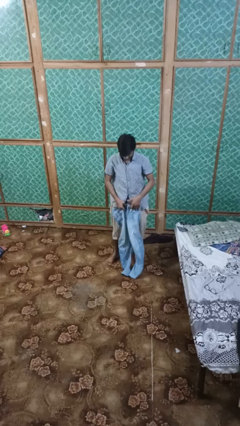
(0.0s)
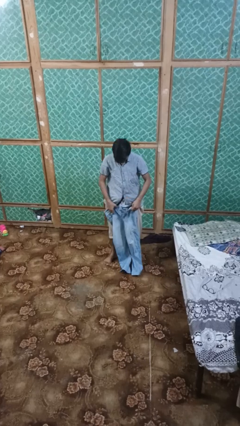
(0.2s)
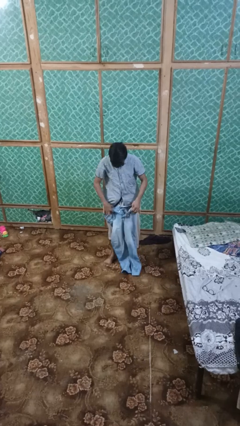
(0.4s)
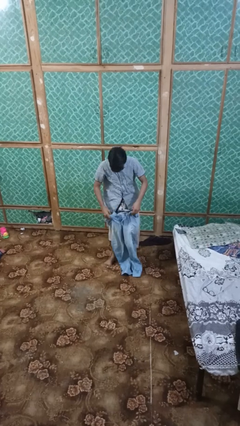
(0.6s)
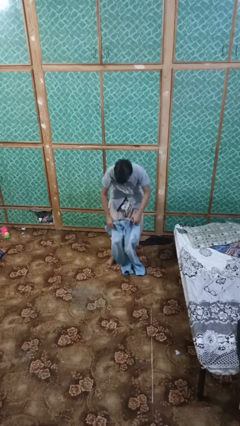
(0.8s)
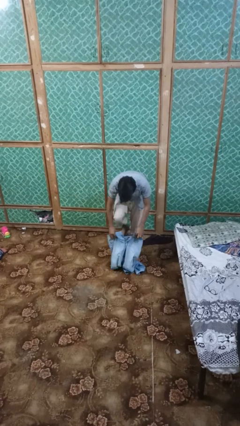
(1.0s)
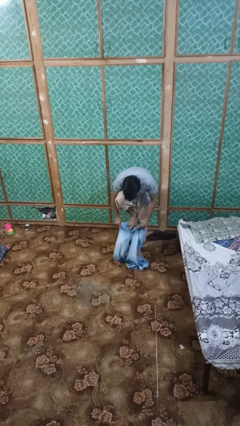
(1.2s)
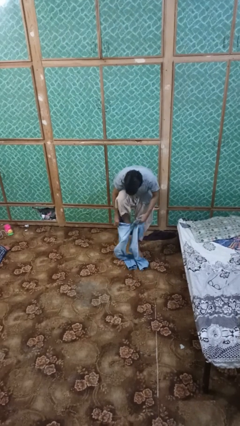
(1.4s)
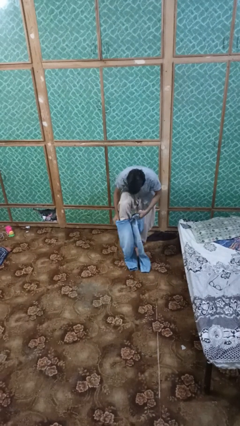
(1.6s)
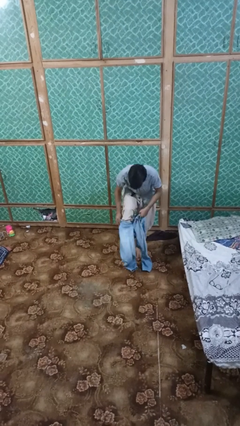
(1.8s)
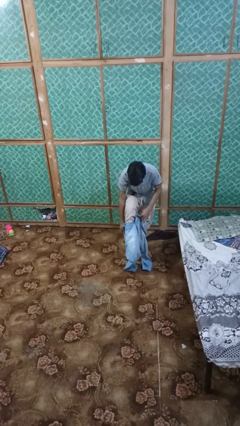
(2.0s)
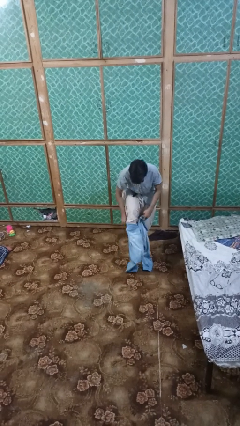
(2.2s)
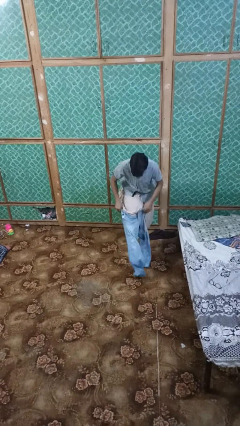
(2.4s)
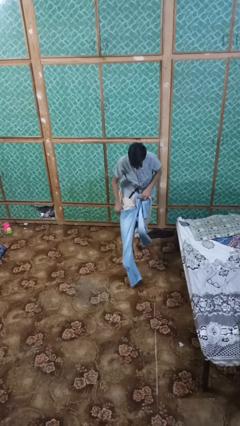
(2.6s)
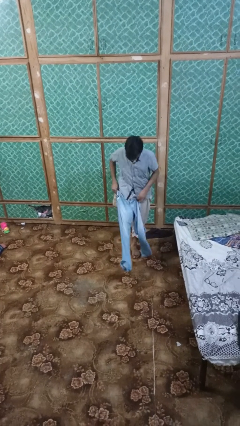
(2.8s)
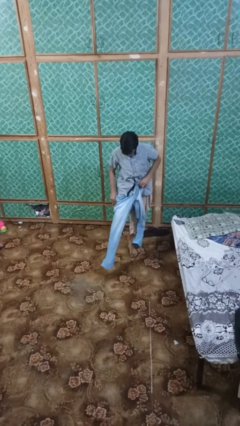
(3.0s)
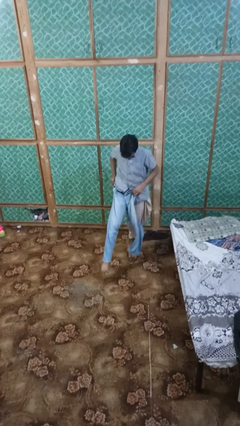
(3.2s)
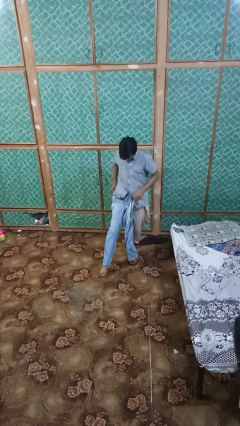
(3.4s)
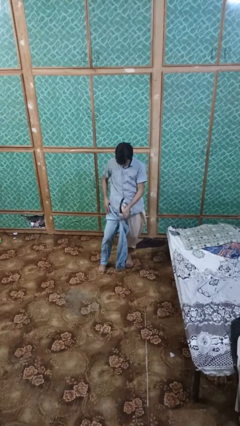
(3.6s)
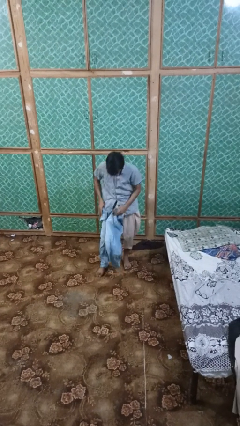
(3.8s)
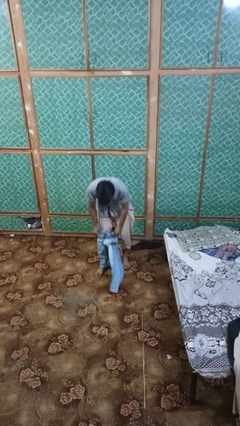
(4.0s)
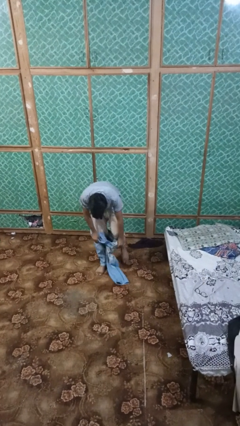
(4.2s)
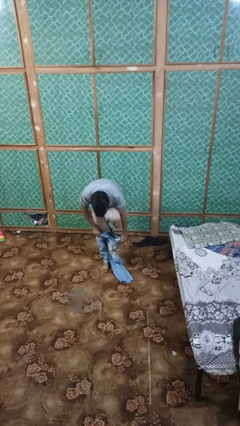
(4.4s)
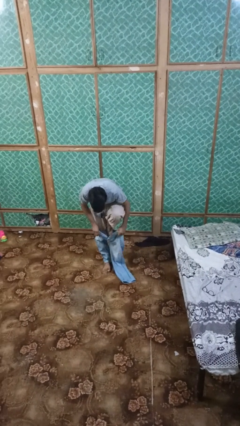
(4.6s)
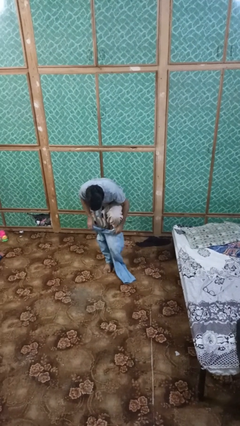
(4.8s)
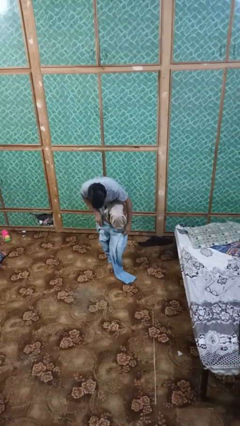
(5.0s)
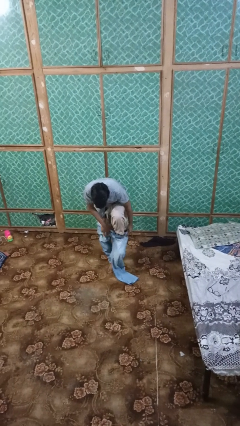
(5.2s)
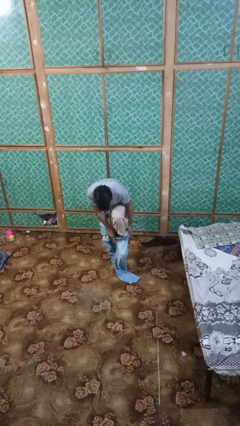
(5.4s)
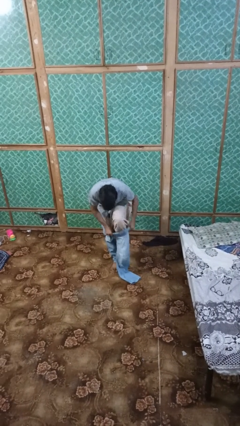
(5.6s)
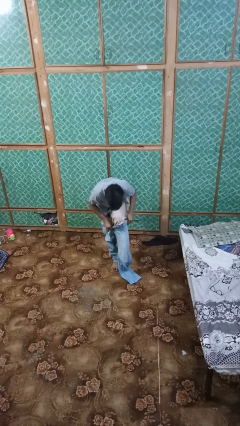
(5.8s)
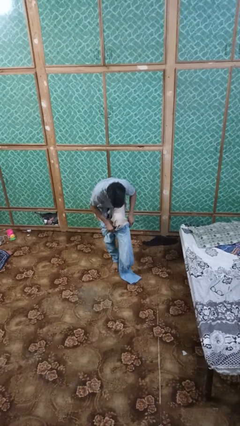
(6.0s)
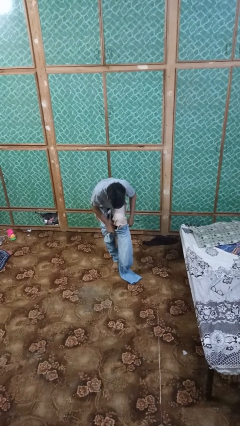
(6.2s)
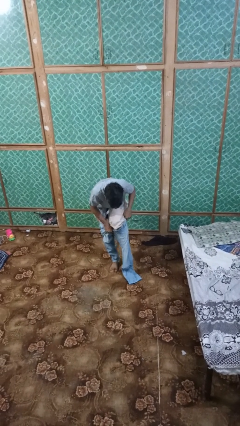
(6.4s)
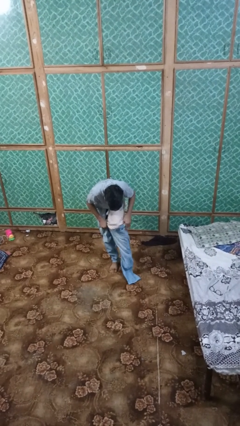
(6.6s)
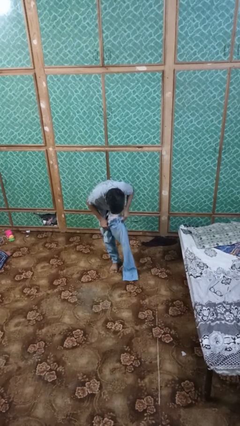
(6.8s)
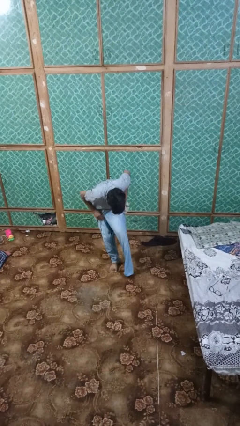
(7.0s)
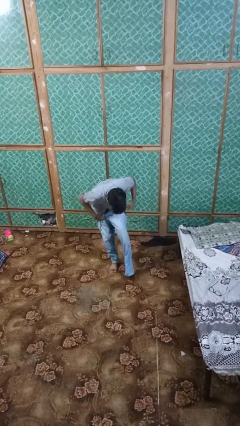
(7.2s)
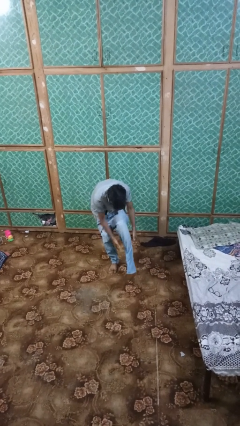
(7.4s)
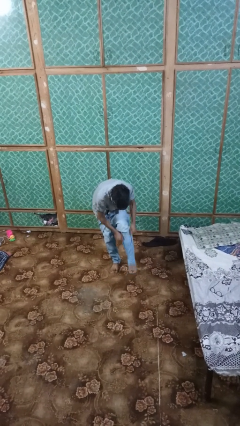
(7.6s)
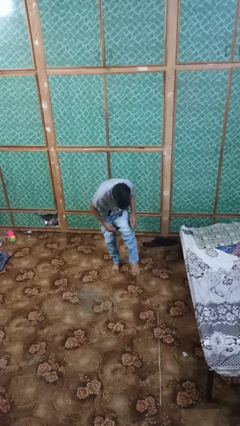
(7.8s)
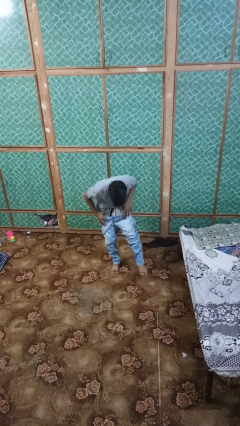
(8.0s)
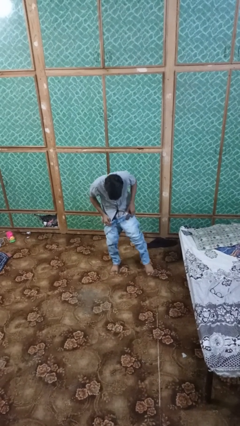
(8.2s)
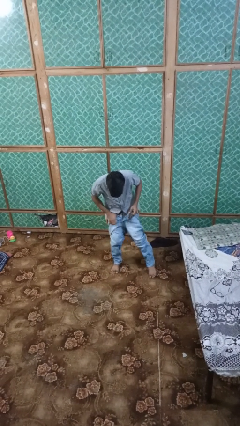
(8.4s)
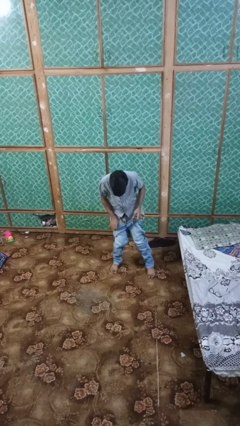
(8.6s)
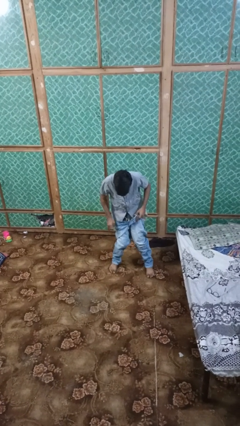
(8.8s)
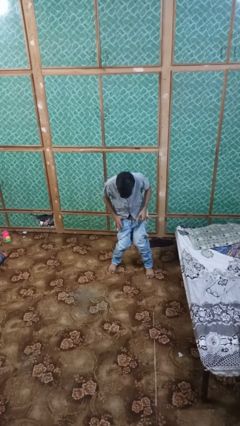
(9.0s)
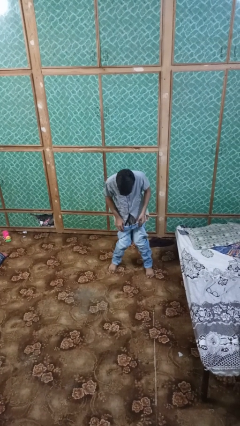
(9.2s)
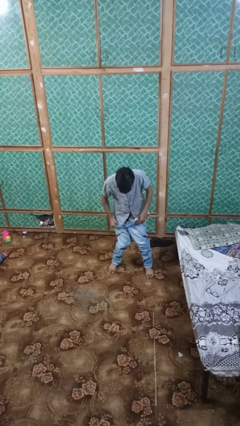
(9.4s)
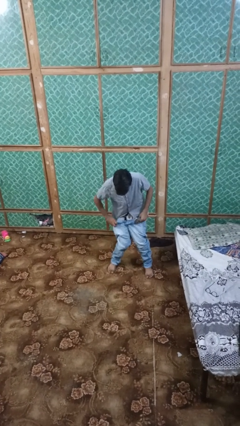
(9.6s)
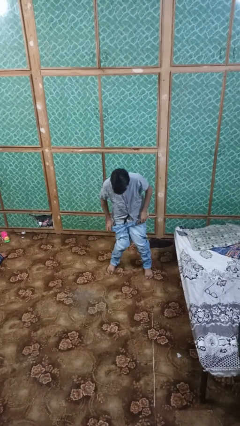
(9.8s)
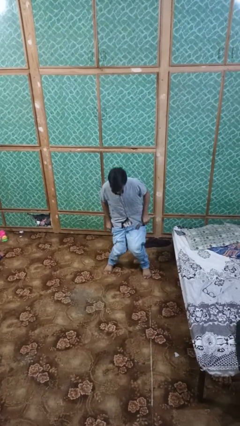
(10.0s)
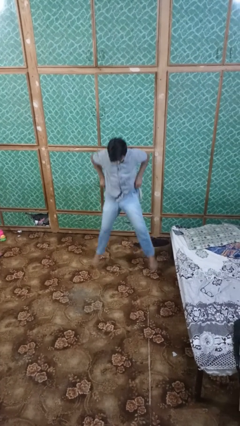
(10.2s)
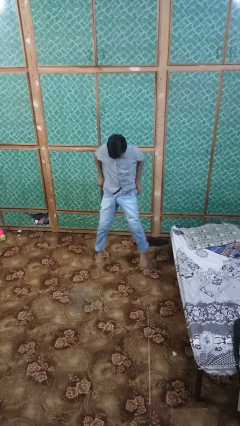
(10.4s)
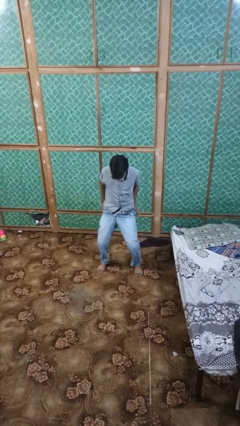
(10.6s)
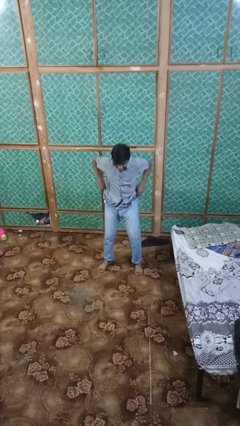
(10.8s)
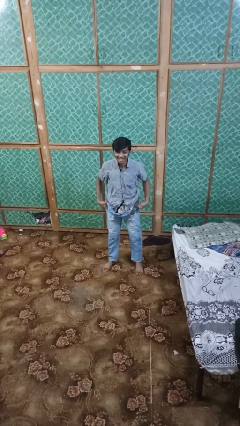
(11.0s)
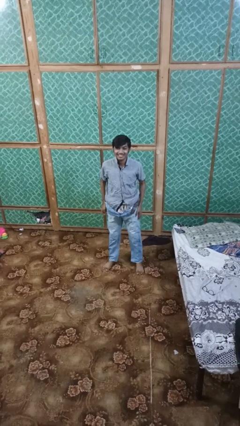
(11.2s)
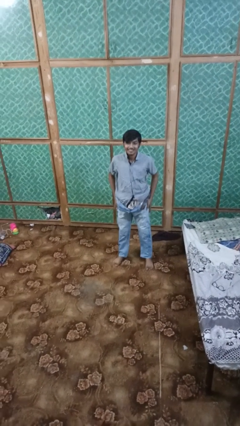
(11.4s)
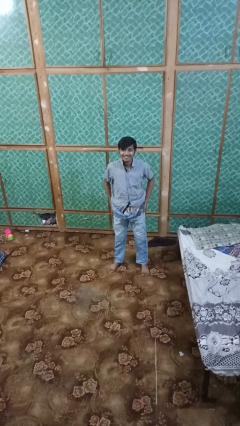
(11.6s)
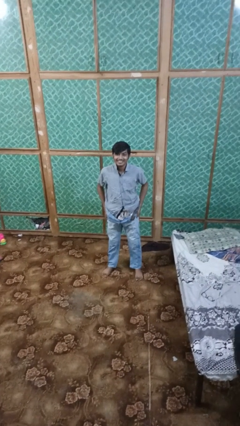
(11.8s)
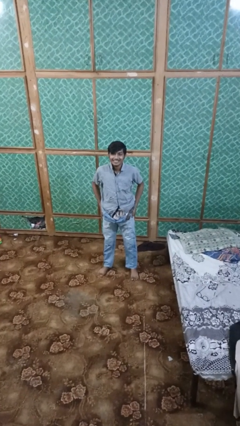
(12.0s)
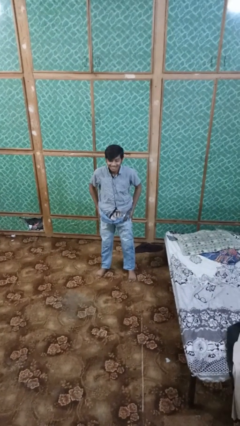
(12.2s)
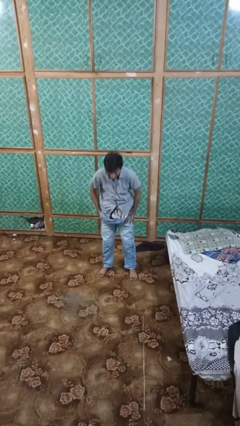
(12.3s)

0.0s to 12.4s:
person puts on pants

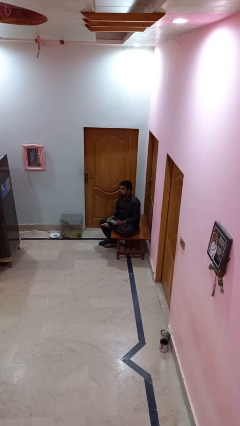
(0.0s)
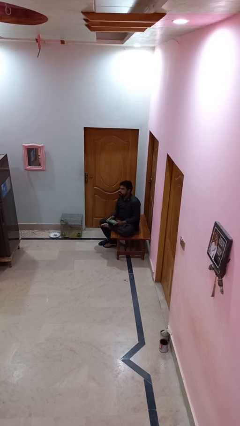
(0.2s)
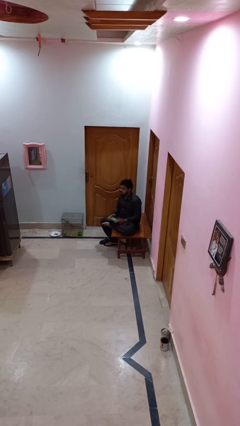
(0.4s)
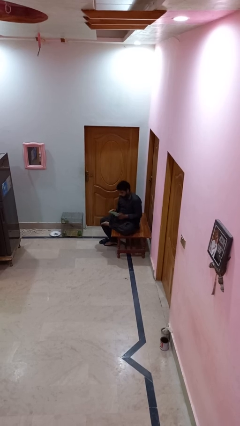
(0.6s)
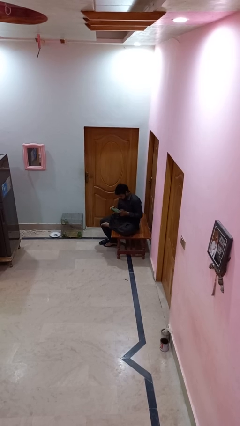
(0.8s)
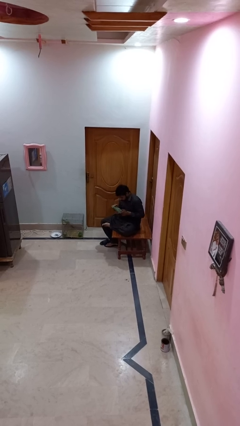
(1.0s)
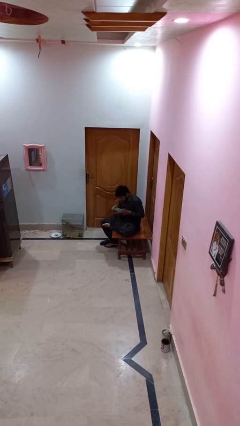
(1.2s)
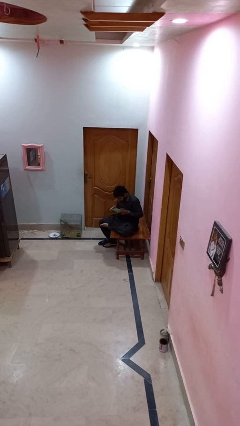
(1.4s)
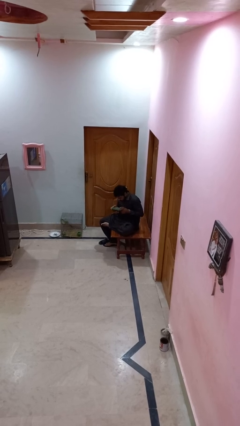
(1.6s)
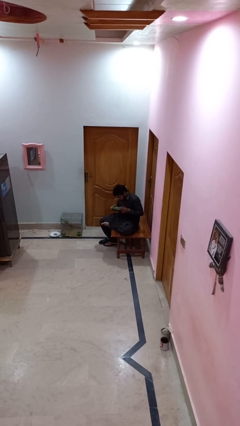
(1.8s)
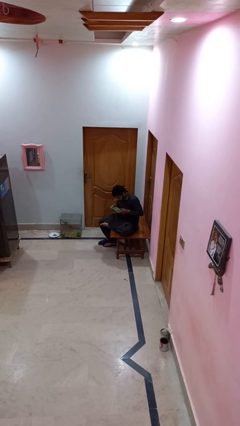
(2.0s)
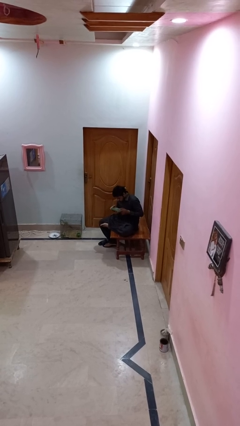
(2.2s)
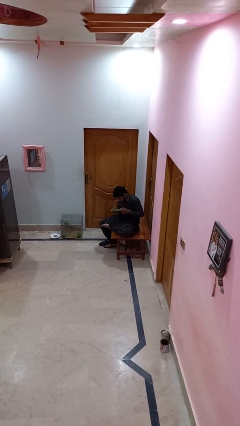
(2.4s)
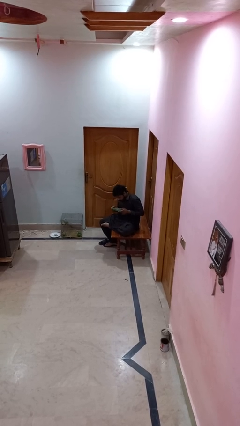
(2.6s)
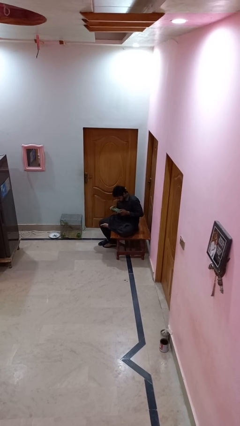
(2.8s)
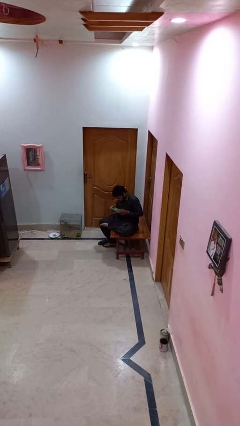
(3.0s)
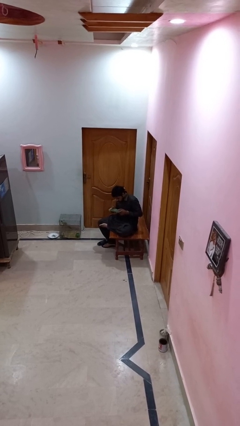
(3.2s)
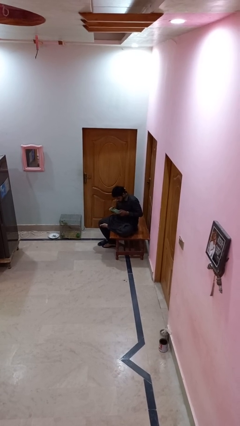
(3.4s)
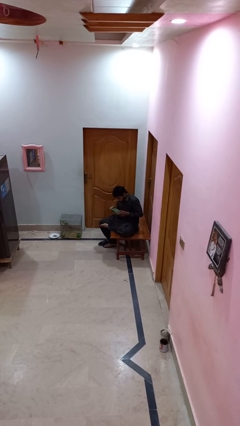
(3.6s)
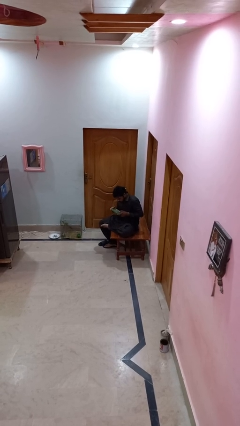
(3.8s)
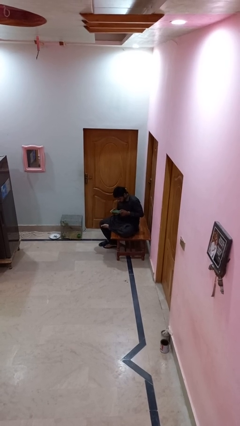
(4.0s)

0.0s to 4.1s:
person interacts with handheld game

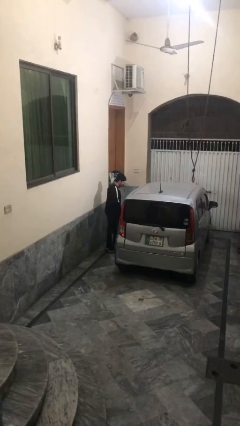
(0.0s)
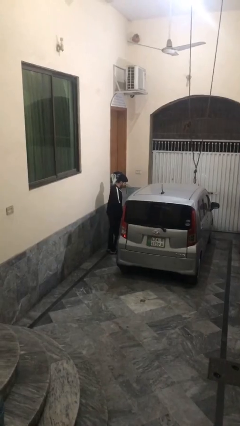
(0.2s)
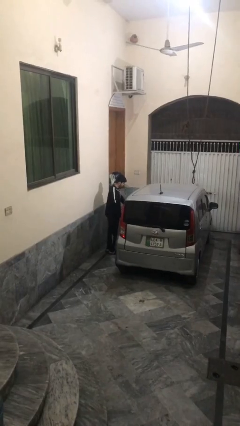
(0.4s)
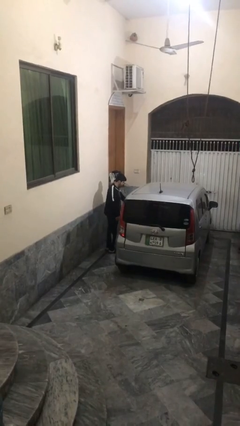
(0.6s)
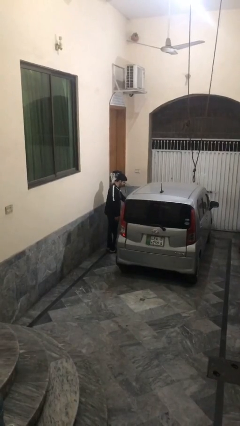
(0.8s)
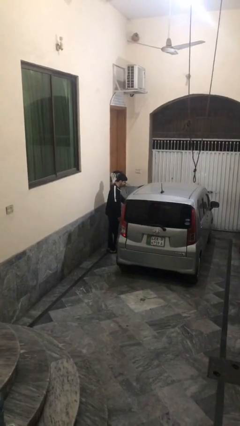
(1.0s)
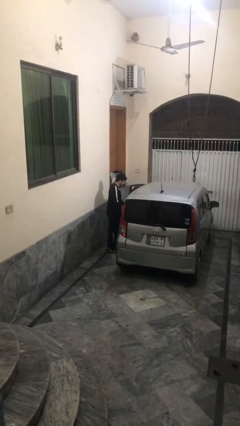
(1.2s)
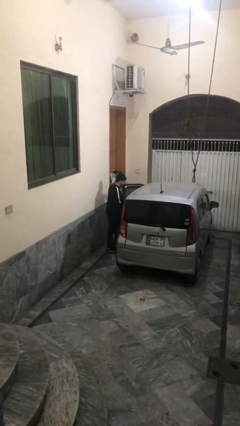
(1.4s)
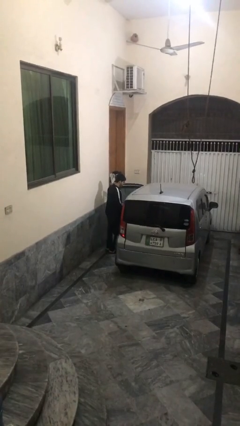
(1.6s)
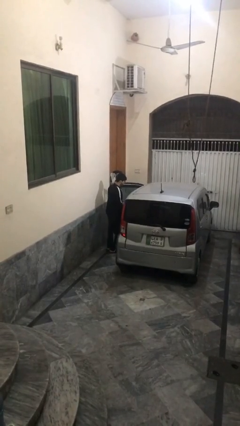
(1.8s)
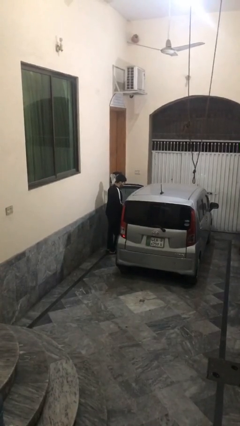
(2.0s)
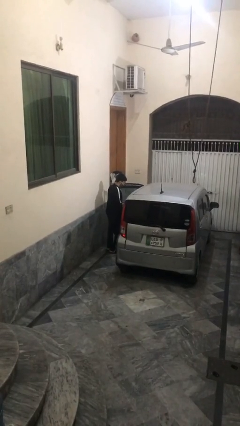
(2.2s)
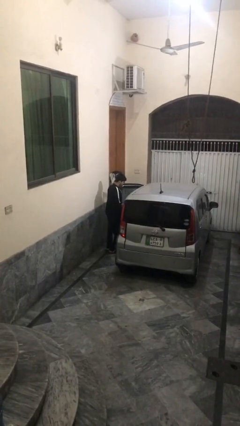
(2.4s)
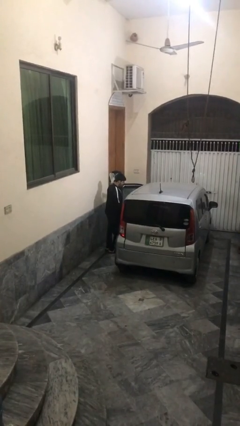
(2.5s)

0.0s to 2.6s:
person opens car door
